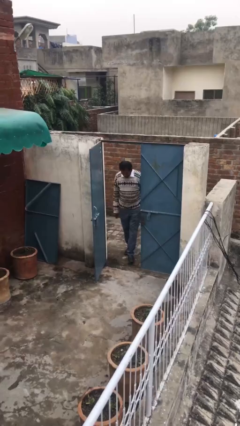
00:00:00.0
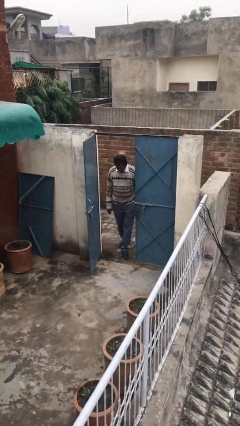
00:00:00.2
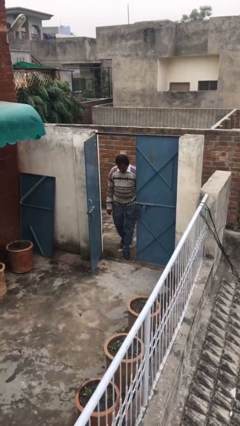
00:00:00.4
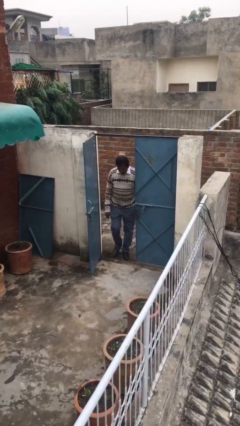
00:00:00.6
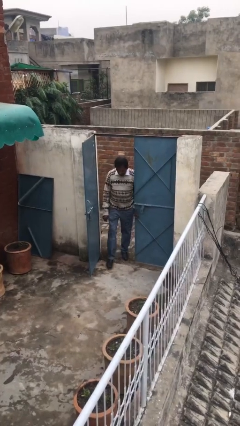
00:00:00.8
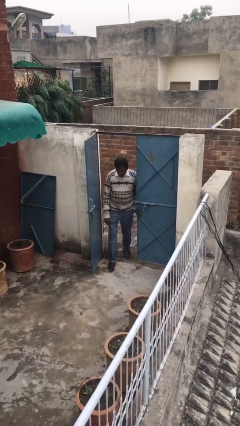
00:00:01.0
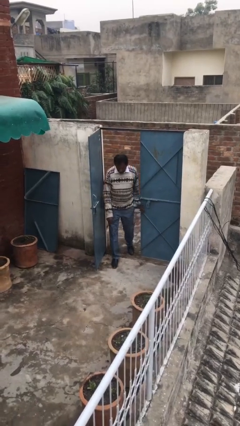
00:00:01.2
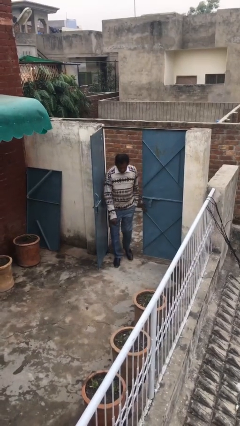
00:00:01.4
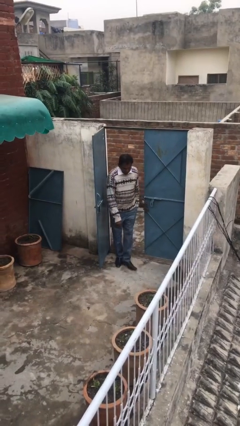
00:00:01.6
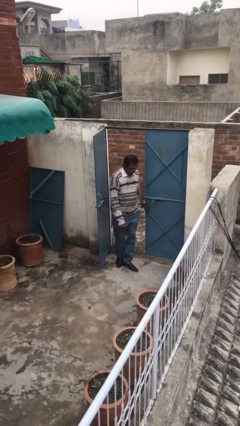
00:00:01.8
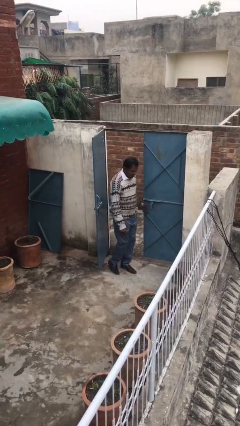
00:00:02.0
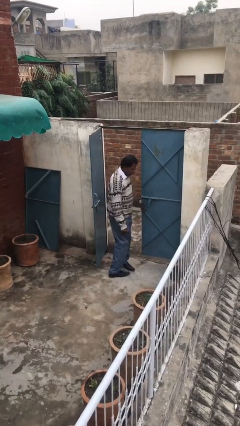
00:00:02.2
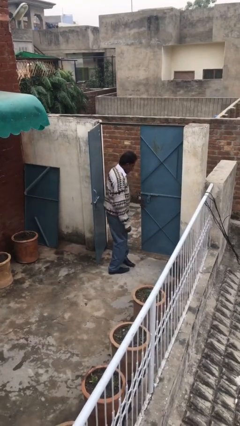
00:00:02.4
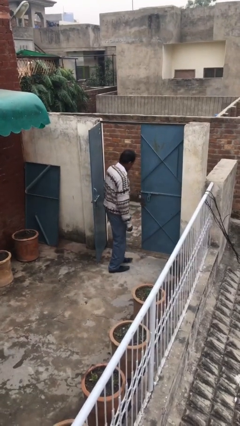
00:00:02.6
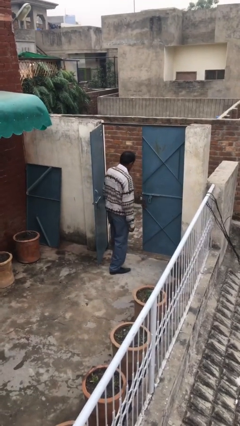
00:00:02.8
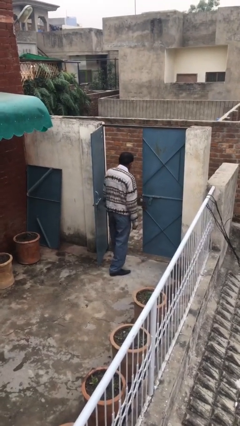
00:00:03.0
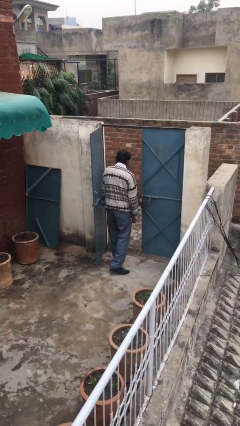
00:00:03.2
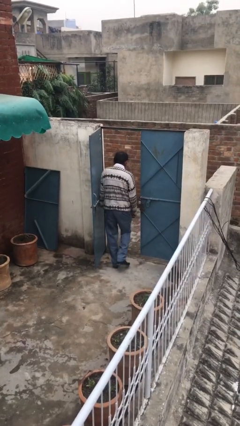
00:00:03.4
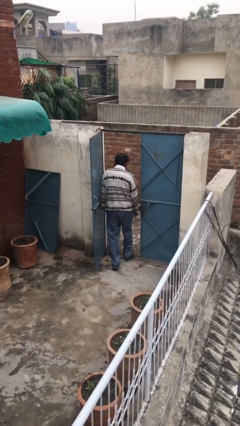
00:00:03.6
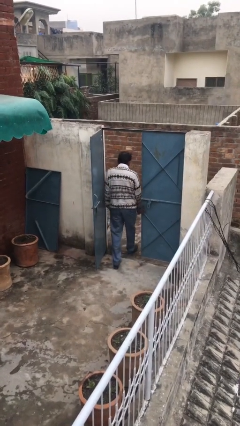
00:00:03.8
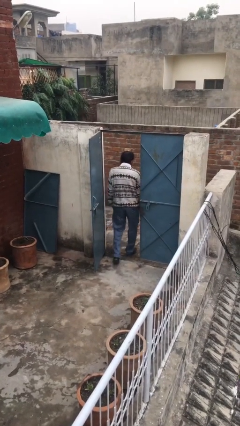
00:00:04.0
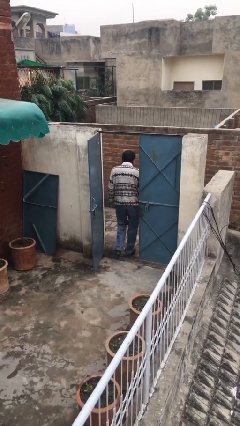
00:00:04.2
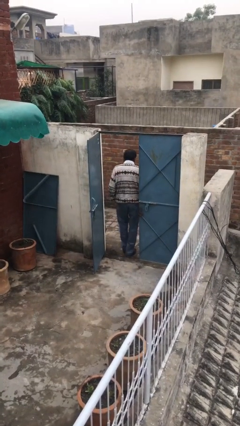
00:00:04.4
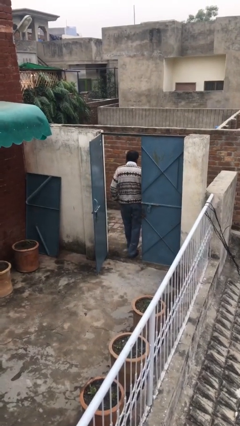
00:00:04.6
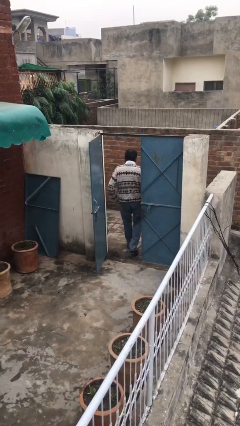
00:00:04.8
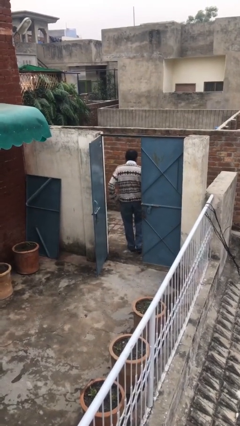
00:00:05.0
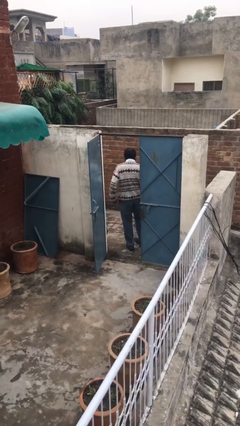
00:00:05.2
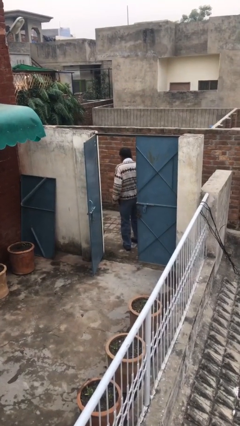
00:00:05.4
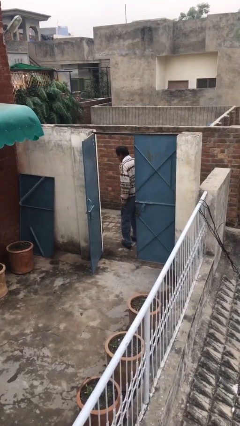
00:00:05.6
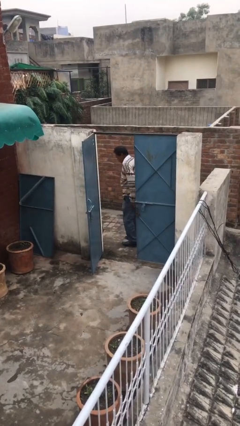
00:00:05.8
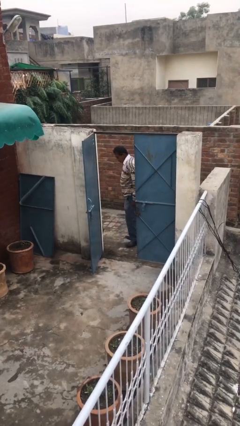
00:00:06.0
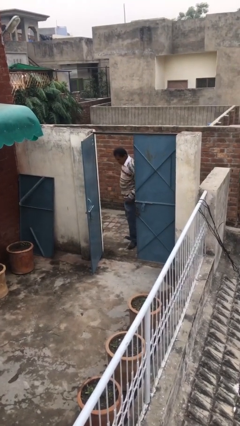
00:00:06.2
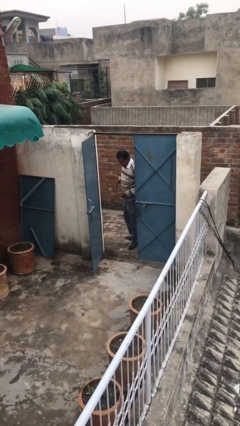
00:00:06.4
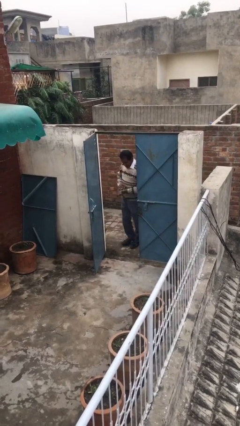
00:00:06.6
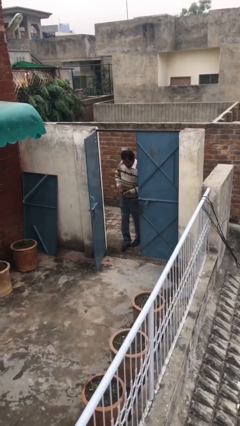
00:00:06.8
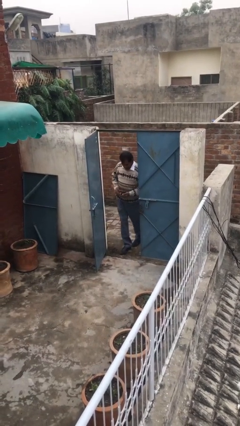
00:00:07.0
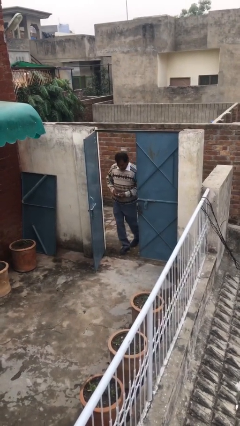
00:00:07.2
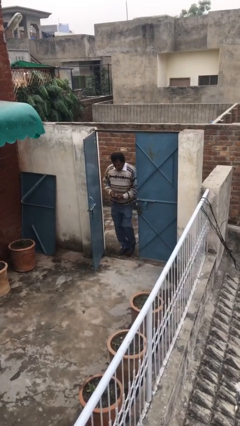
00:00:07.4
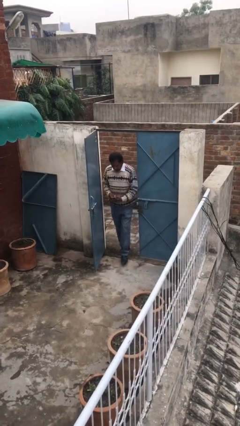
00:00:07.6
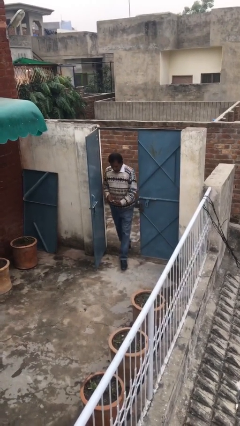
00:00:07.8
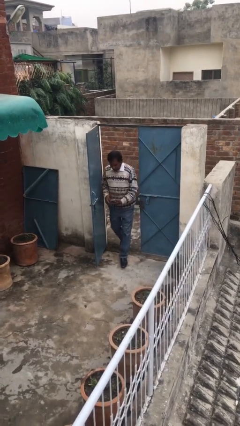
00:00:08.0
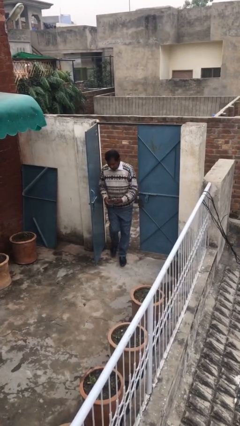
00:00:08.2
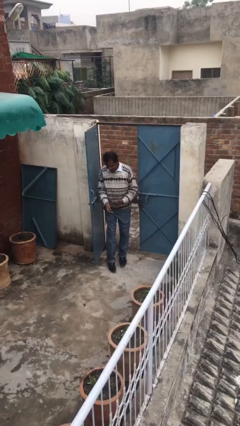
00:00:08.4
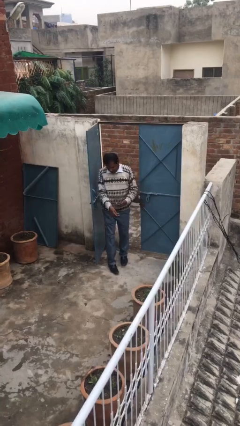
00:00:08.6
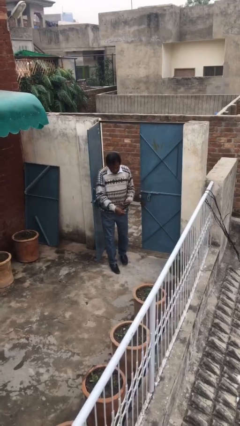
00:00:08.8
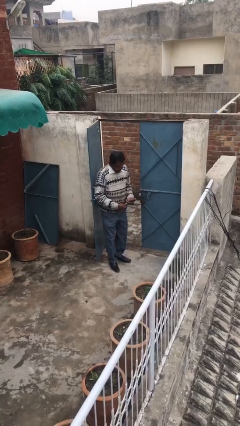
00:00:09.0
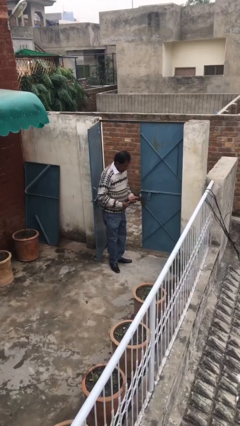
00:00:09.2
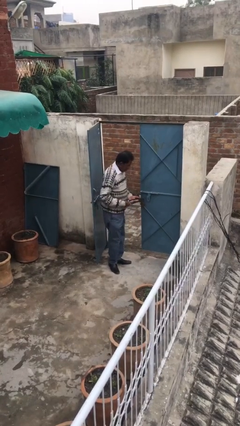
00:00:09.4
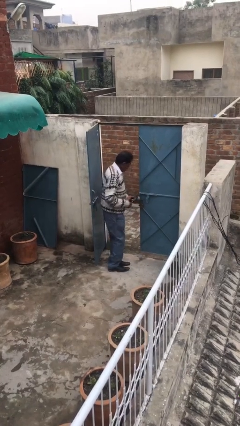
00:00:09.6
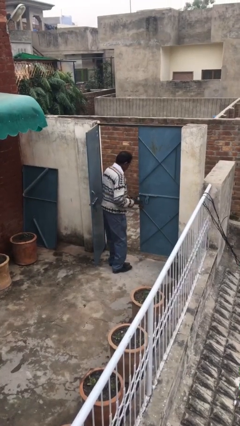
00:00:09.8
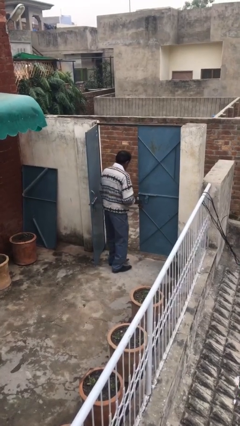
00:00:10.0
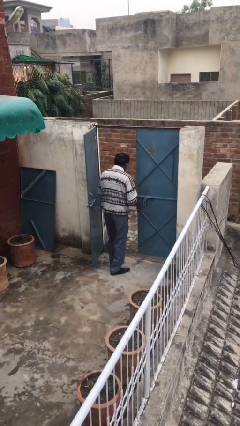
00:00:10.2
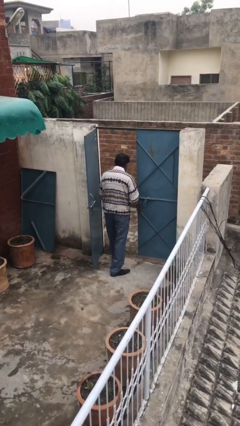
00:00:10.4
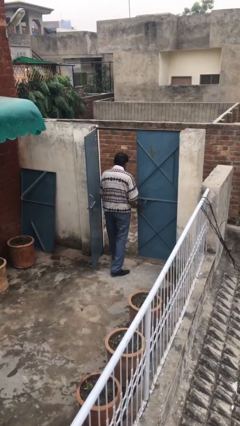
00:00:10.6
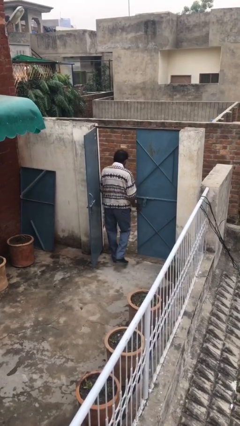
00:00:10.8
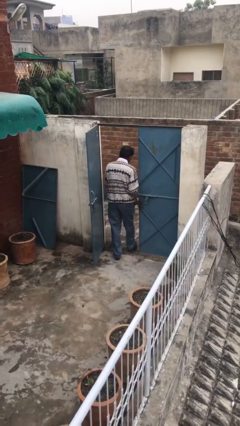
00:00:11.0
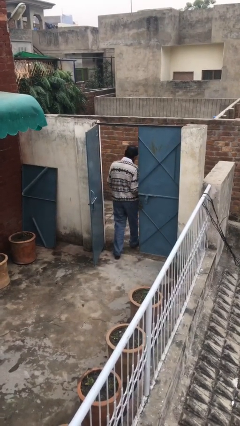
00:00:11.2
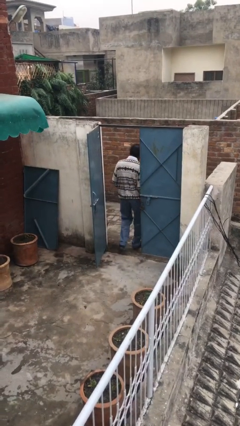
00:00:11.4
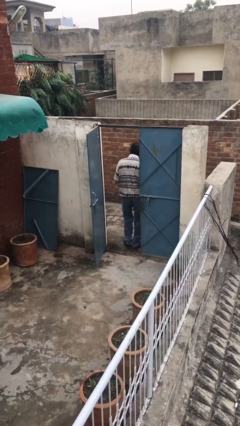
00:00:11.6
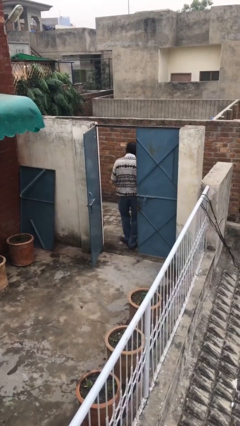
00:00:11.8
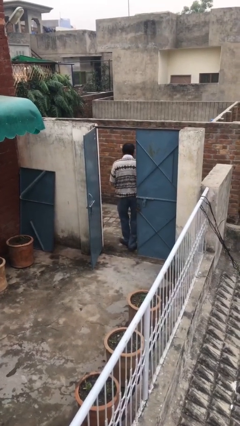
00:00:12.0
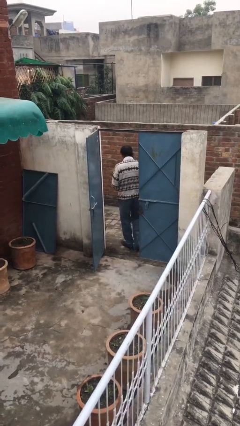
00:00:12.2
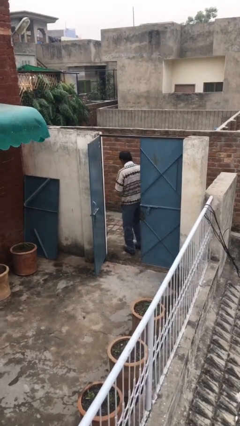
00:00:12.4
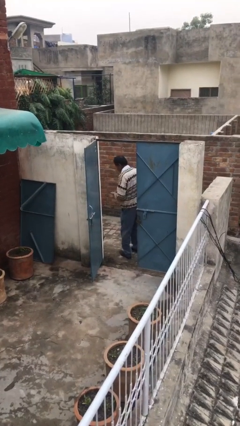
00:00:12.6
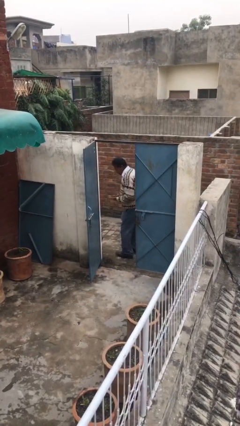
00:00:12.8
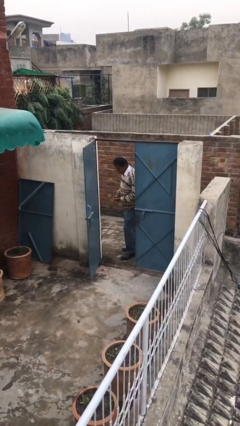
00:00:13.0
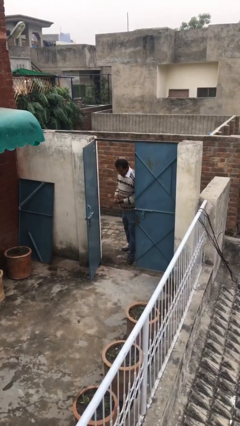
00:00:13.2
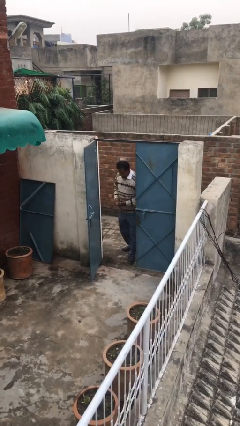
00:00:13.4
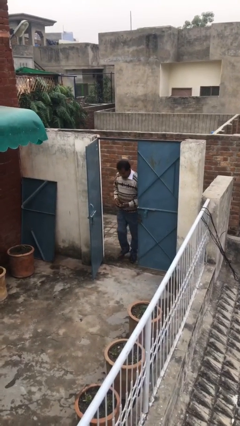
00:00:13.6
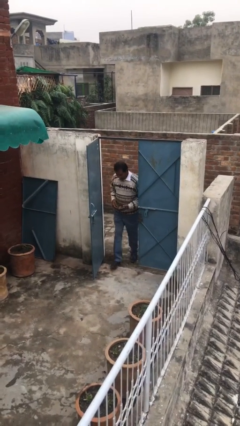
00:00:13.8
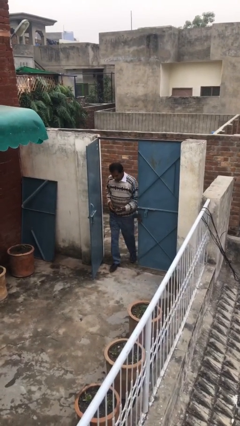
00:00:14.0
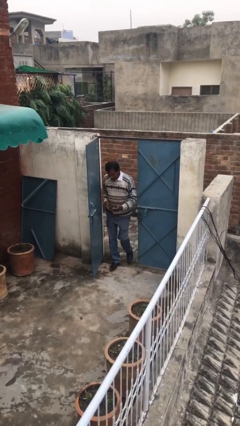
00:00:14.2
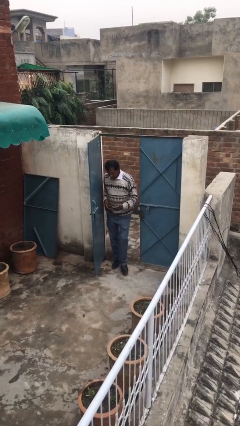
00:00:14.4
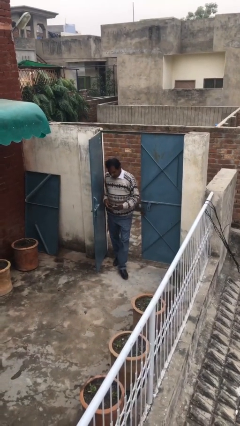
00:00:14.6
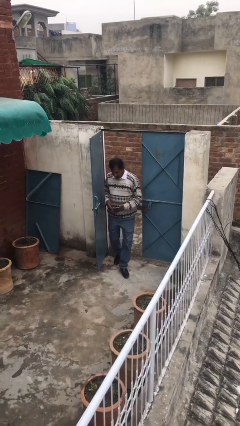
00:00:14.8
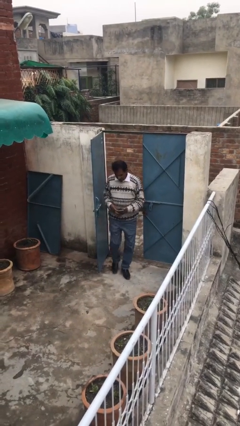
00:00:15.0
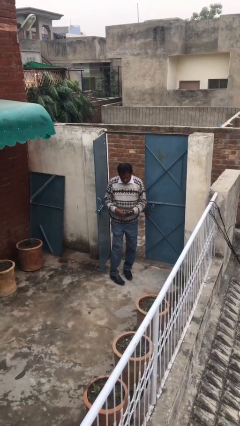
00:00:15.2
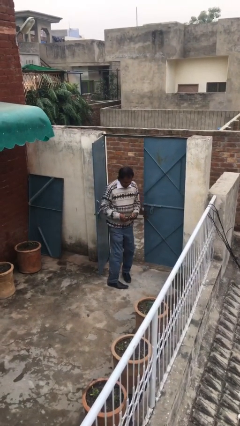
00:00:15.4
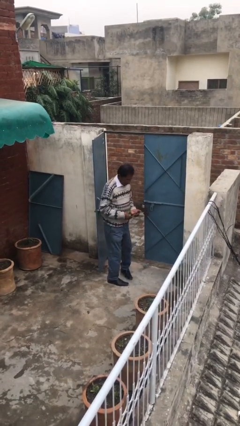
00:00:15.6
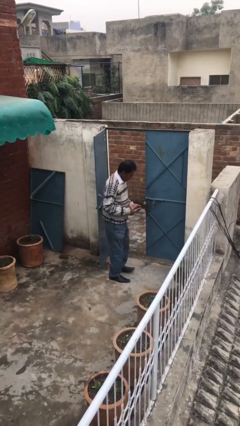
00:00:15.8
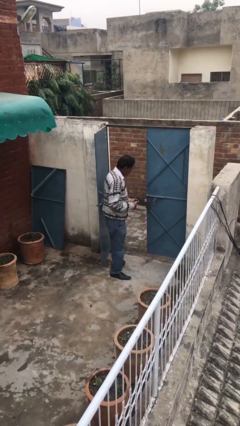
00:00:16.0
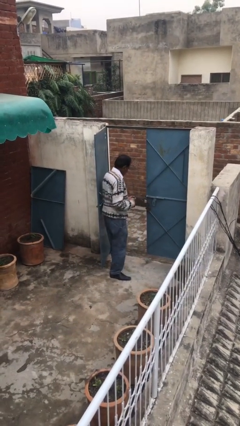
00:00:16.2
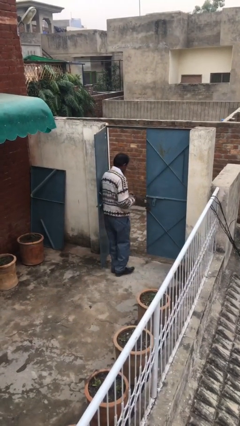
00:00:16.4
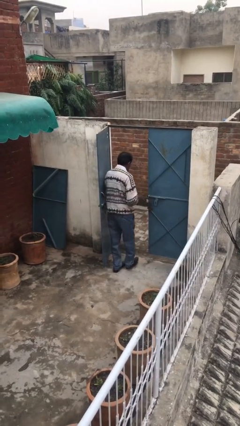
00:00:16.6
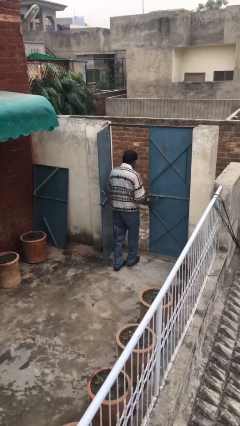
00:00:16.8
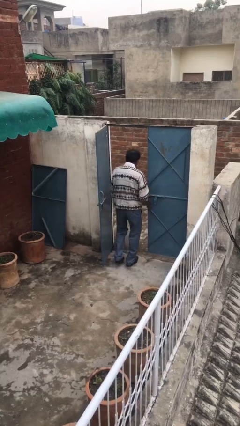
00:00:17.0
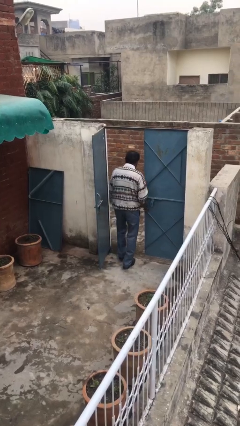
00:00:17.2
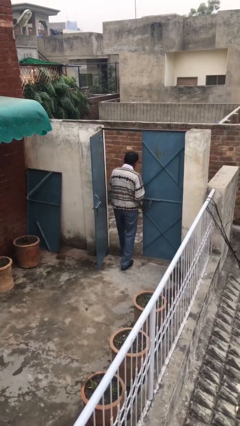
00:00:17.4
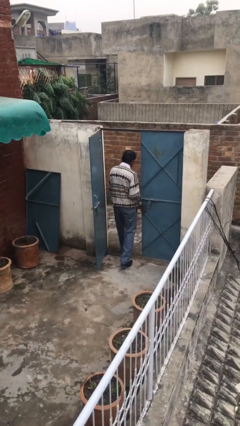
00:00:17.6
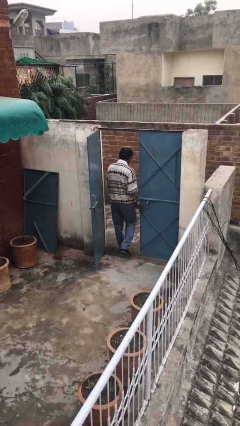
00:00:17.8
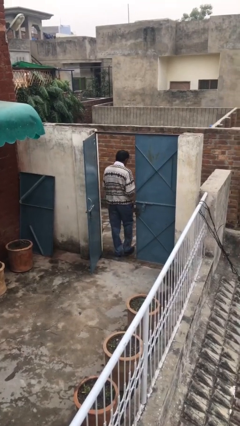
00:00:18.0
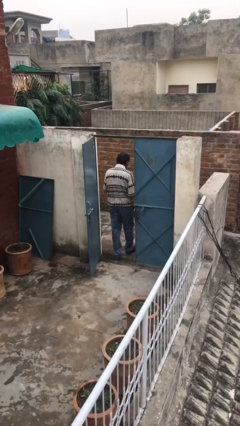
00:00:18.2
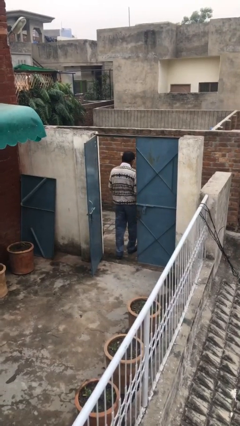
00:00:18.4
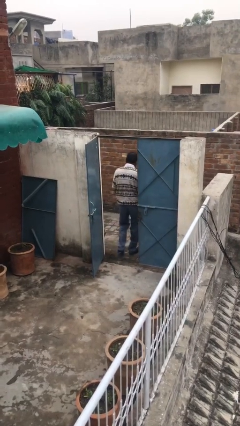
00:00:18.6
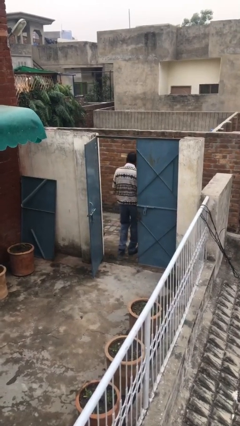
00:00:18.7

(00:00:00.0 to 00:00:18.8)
person texts on phone
